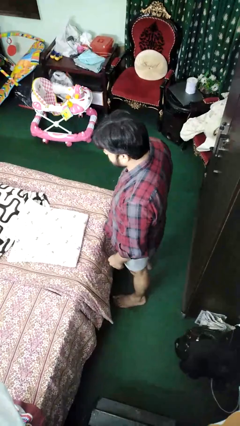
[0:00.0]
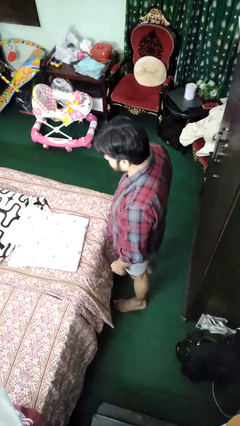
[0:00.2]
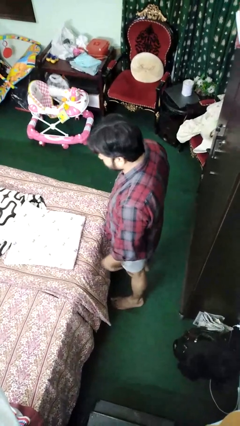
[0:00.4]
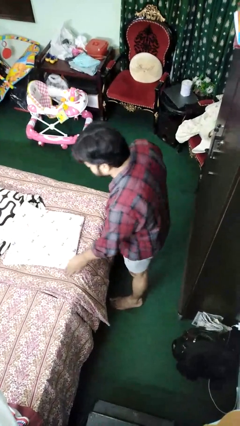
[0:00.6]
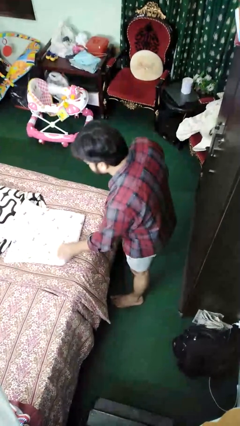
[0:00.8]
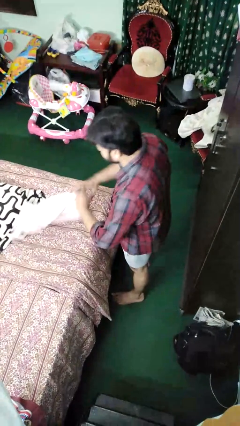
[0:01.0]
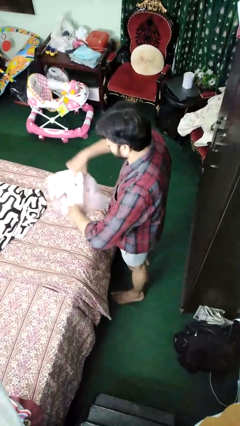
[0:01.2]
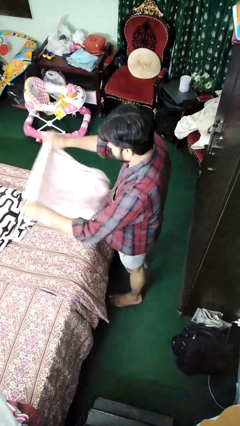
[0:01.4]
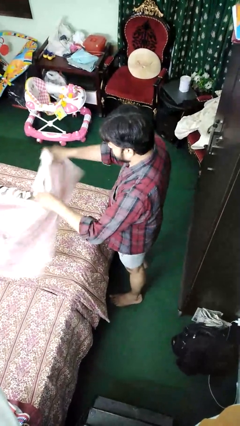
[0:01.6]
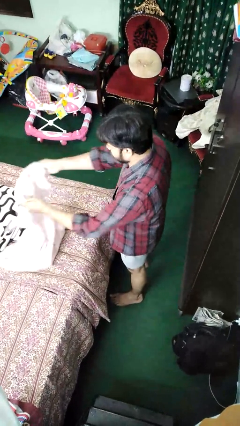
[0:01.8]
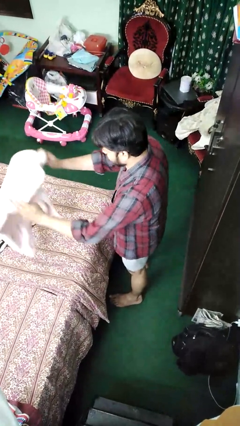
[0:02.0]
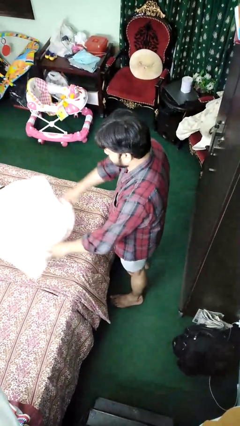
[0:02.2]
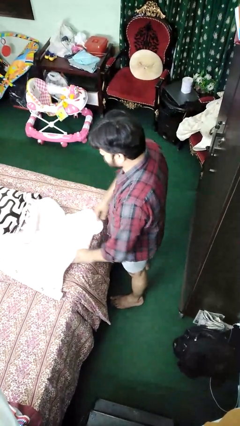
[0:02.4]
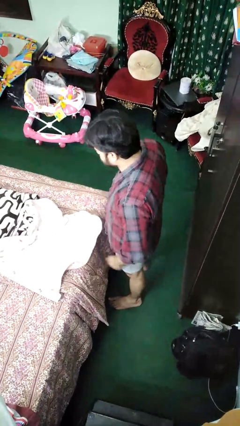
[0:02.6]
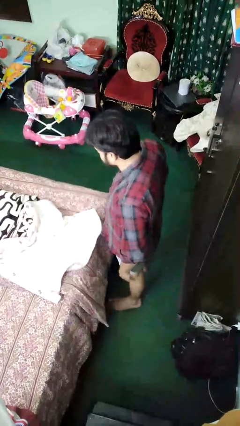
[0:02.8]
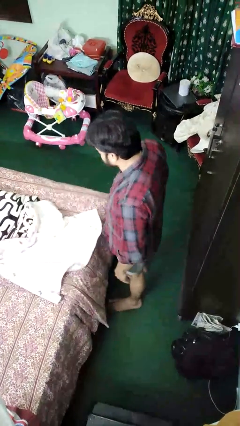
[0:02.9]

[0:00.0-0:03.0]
person unfolds blanket

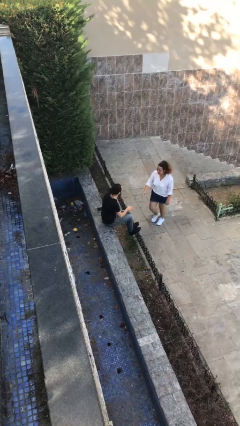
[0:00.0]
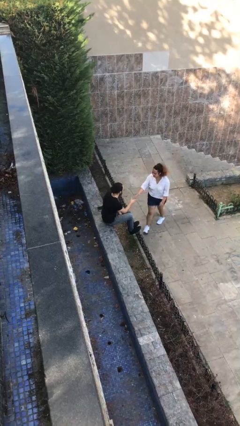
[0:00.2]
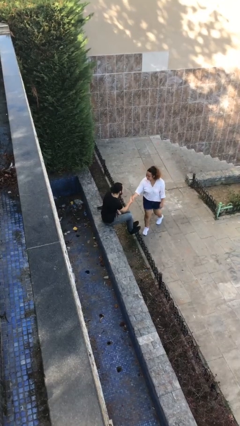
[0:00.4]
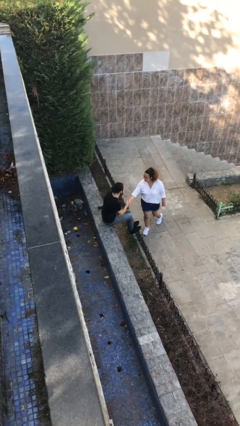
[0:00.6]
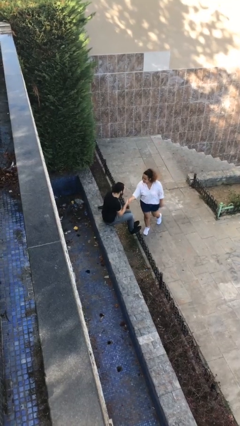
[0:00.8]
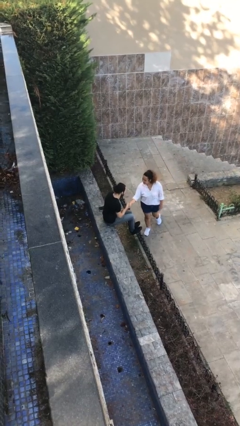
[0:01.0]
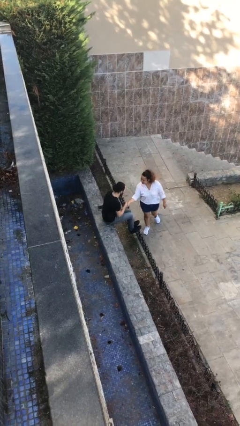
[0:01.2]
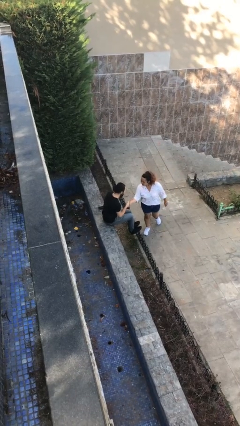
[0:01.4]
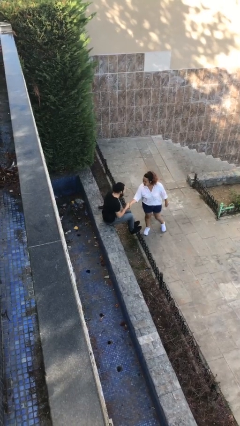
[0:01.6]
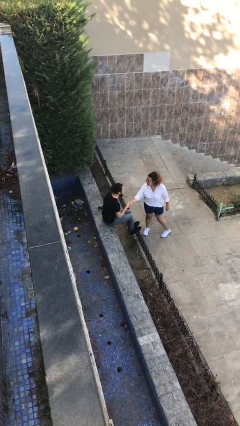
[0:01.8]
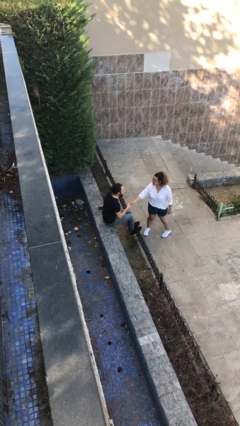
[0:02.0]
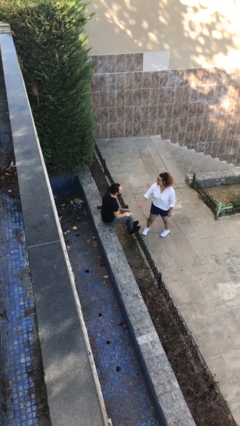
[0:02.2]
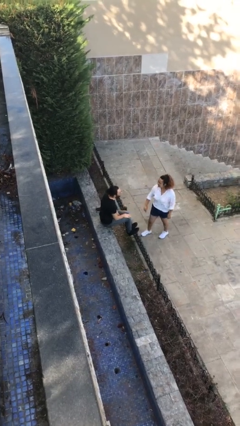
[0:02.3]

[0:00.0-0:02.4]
person shakes hand

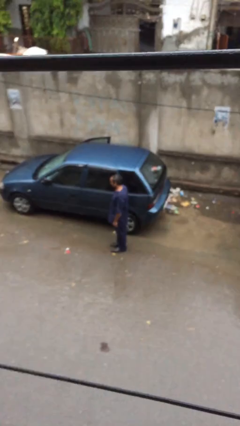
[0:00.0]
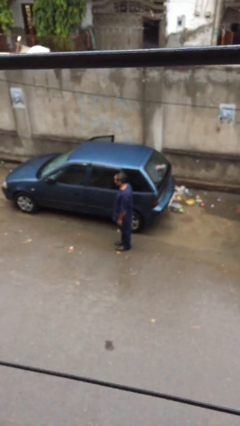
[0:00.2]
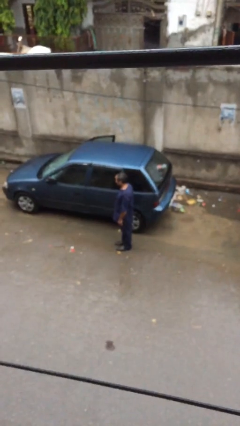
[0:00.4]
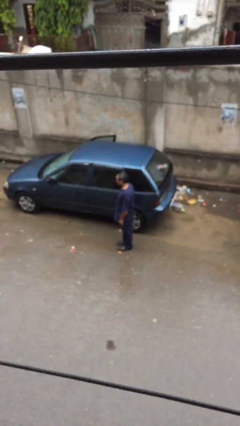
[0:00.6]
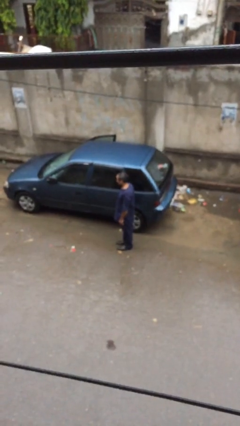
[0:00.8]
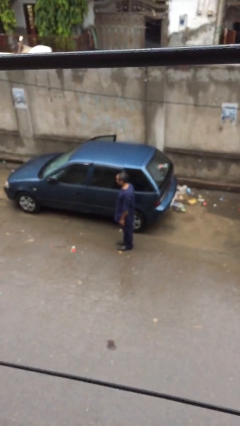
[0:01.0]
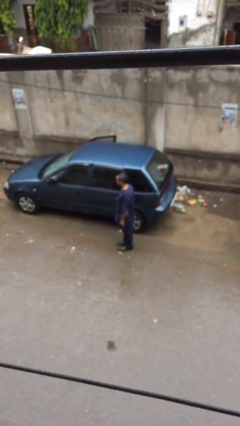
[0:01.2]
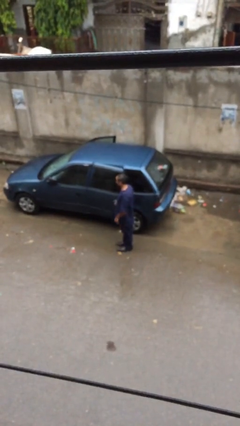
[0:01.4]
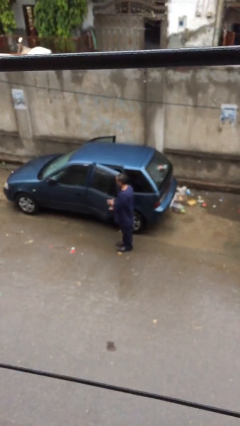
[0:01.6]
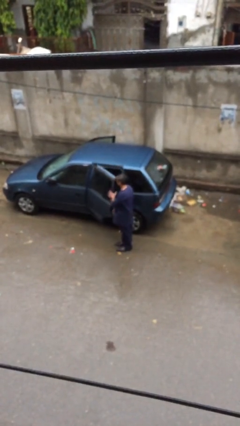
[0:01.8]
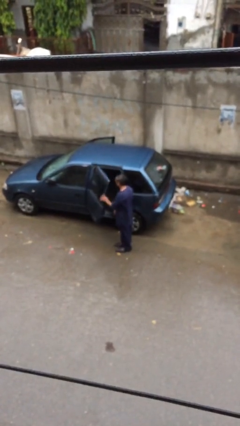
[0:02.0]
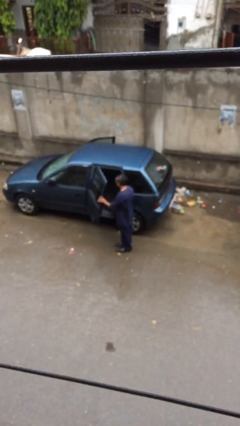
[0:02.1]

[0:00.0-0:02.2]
person opens car door

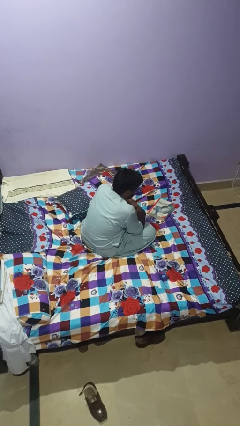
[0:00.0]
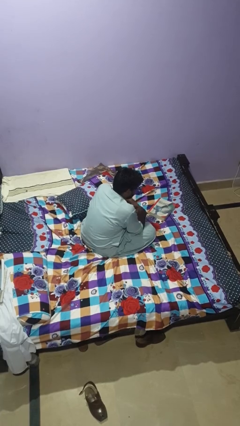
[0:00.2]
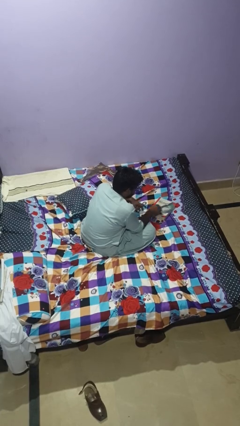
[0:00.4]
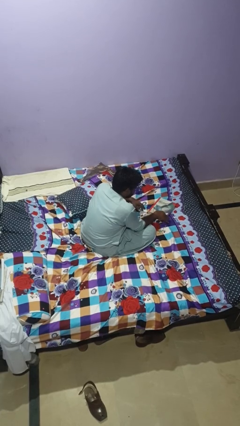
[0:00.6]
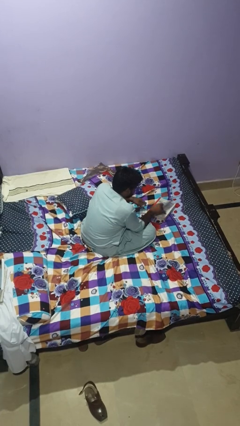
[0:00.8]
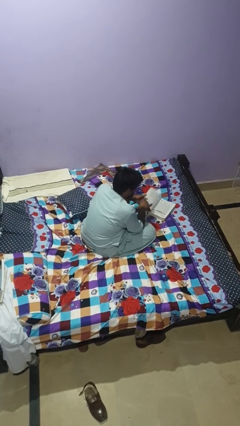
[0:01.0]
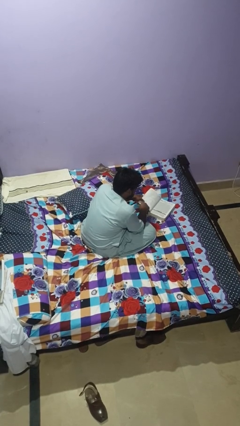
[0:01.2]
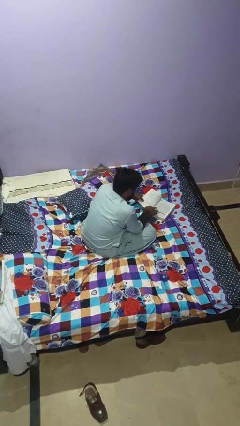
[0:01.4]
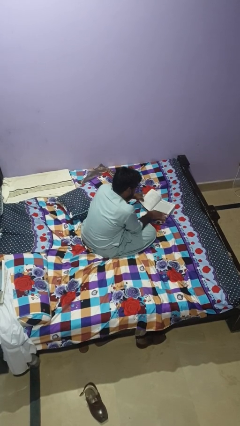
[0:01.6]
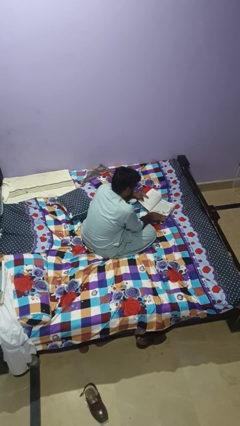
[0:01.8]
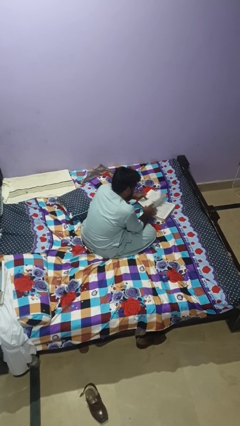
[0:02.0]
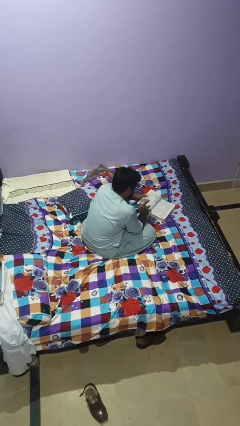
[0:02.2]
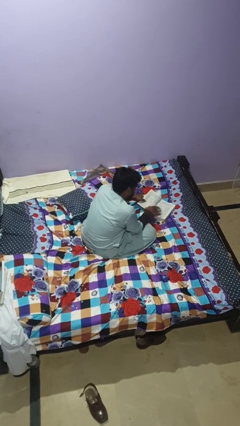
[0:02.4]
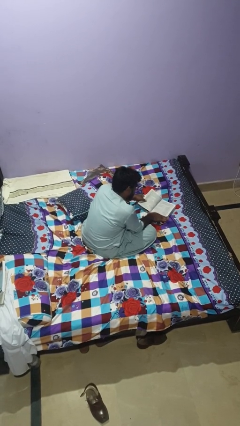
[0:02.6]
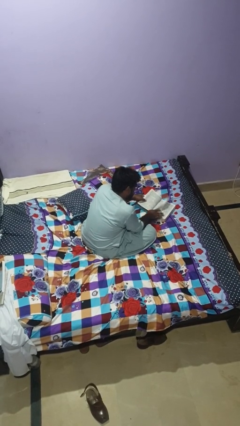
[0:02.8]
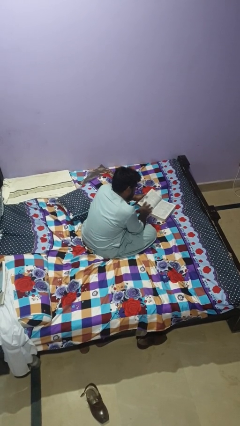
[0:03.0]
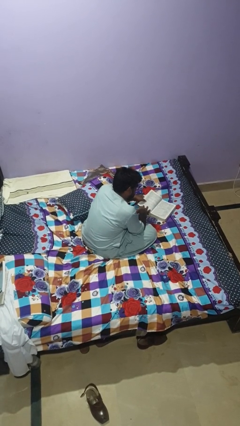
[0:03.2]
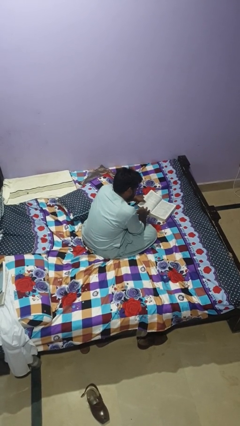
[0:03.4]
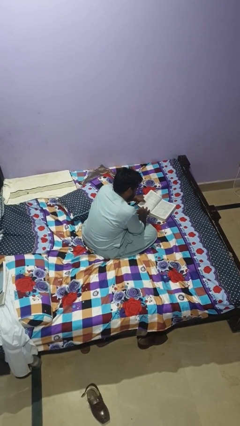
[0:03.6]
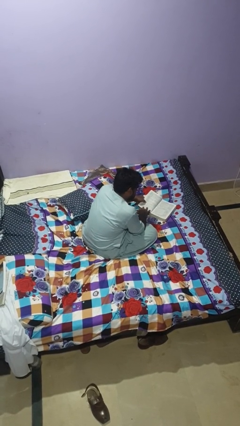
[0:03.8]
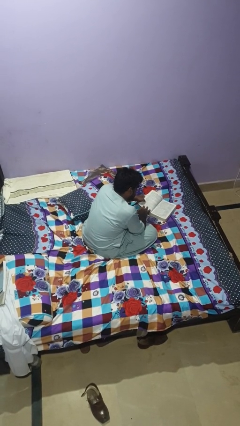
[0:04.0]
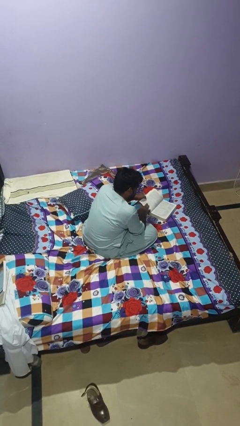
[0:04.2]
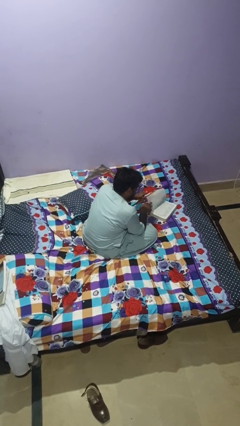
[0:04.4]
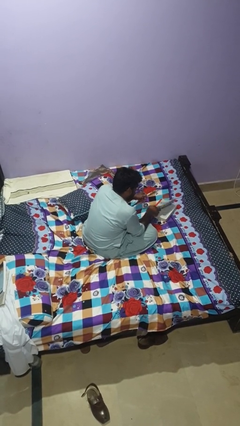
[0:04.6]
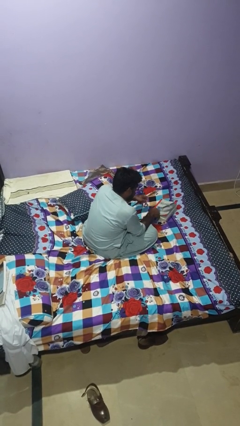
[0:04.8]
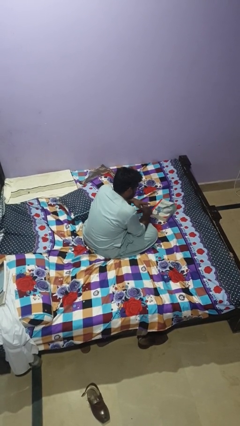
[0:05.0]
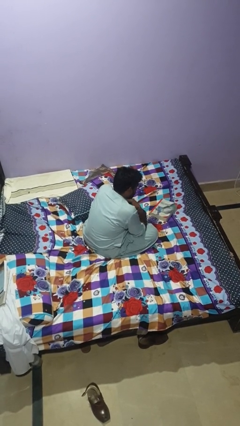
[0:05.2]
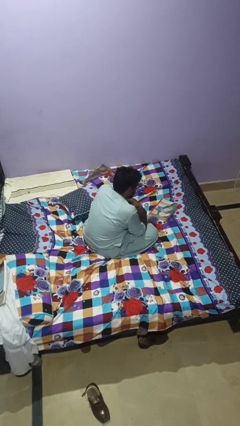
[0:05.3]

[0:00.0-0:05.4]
person reads book

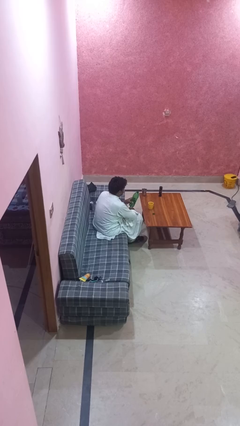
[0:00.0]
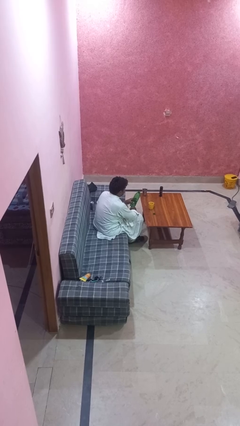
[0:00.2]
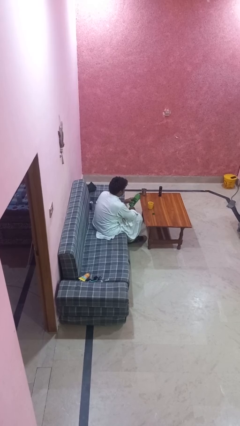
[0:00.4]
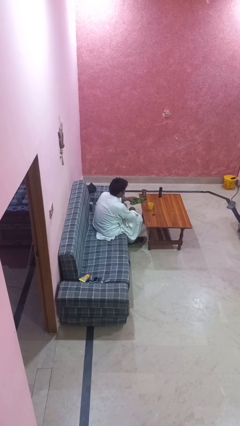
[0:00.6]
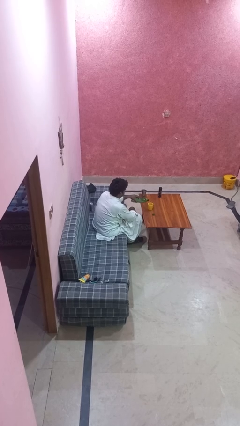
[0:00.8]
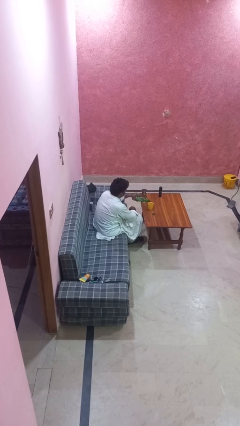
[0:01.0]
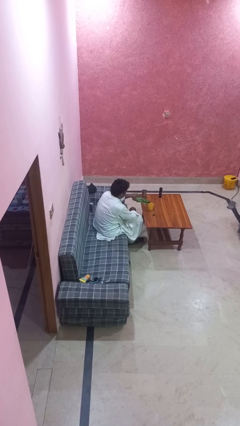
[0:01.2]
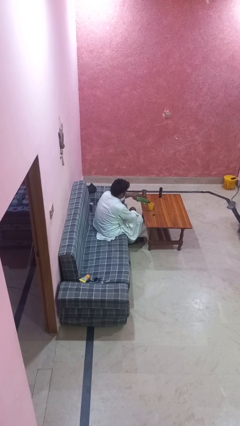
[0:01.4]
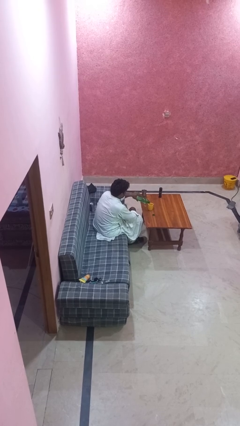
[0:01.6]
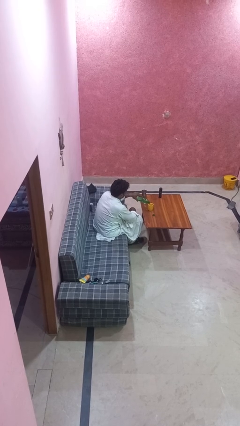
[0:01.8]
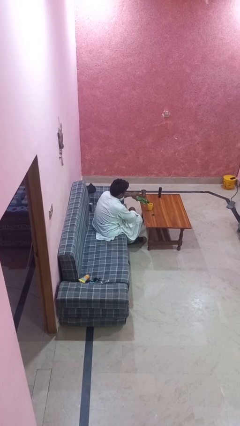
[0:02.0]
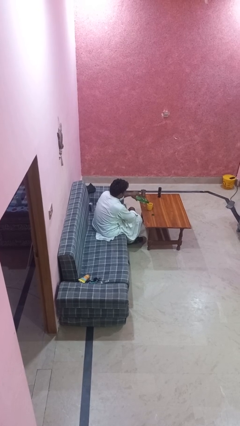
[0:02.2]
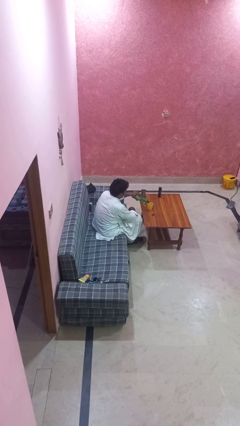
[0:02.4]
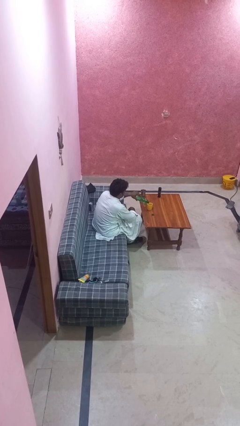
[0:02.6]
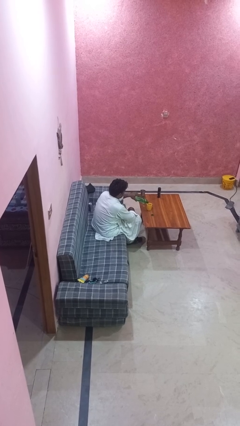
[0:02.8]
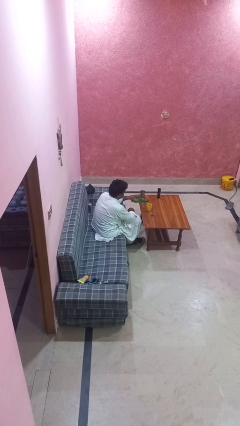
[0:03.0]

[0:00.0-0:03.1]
person pours liquid into cup

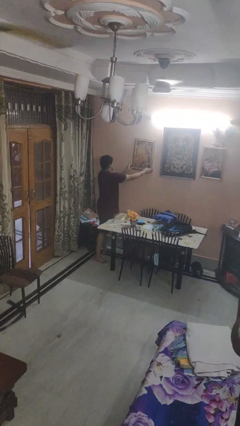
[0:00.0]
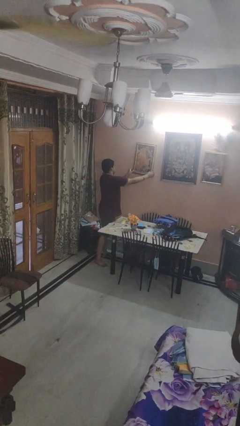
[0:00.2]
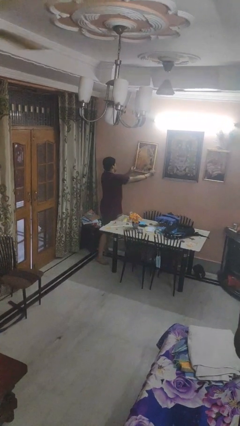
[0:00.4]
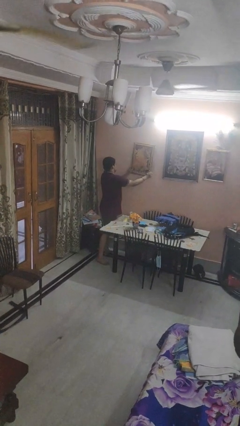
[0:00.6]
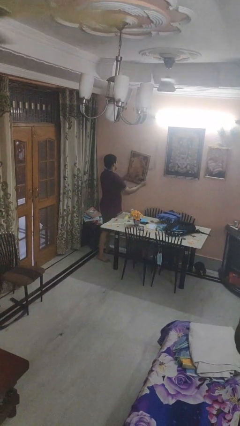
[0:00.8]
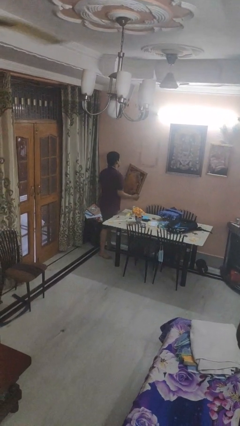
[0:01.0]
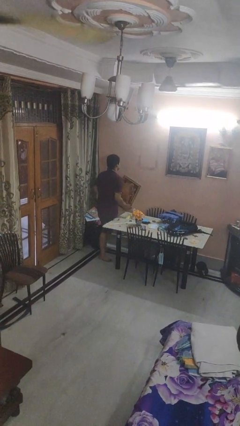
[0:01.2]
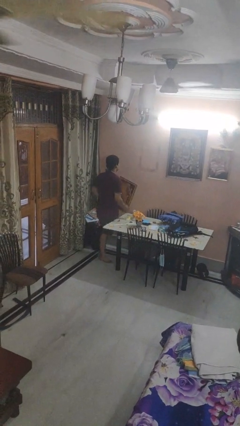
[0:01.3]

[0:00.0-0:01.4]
person takes down picture frame
